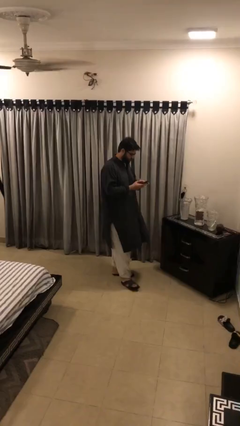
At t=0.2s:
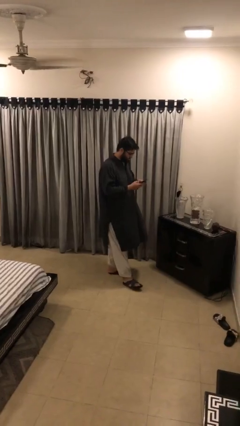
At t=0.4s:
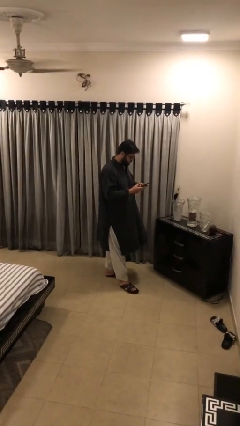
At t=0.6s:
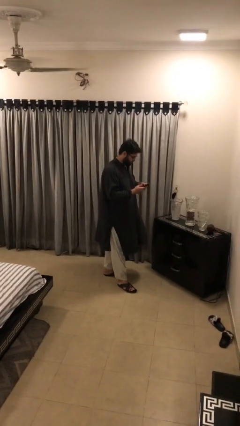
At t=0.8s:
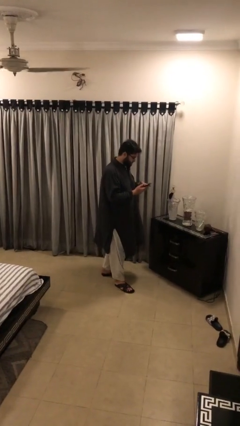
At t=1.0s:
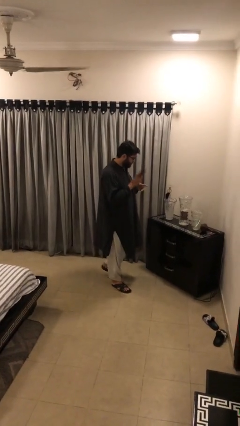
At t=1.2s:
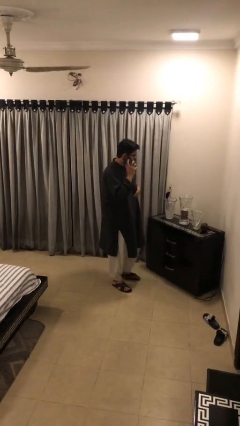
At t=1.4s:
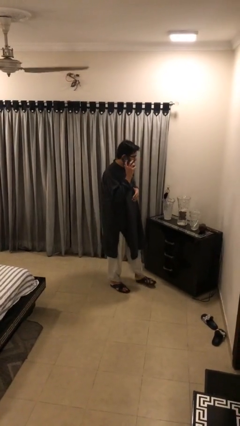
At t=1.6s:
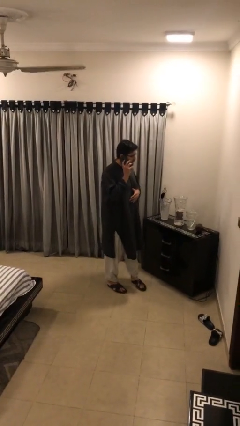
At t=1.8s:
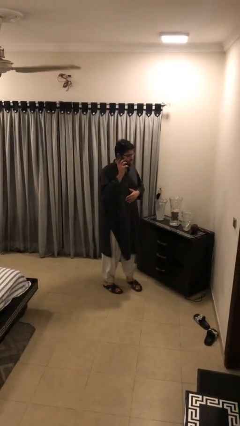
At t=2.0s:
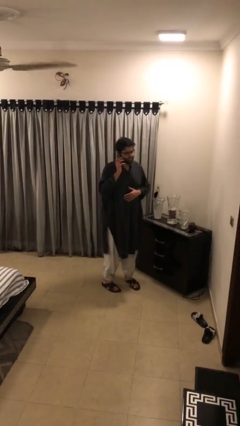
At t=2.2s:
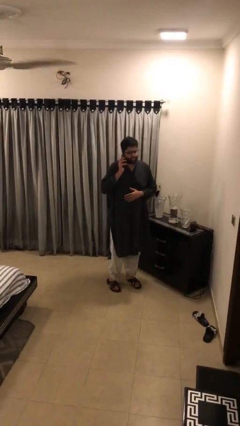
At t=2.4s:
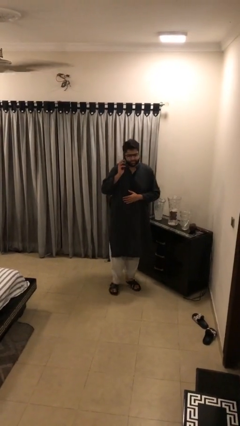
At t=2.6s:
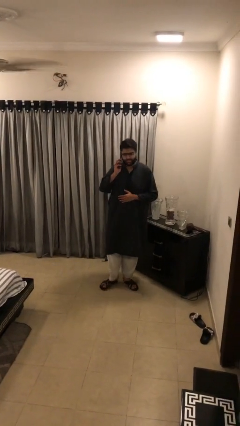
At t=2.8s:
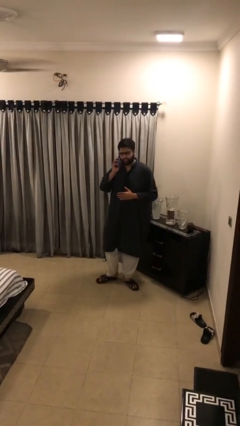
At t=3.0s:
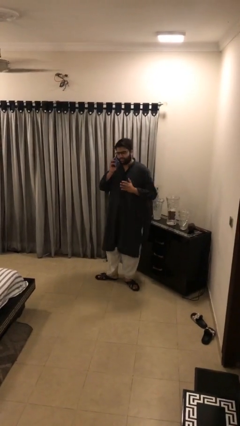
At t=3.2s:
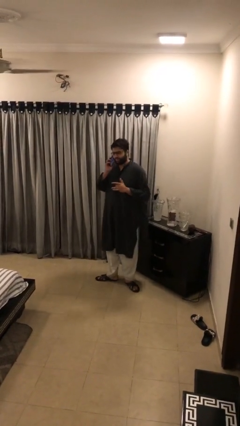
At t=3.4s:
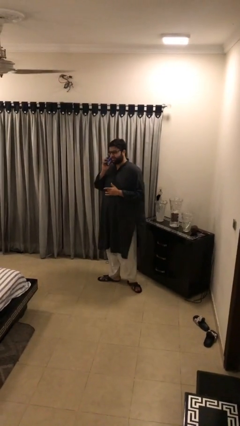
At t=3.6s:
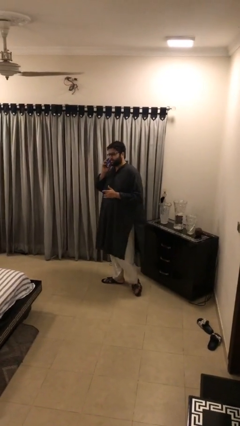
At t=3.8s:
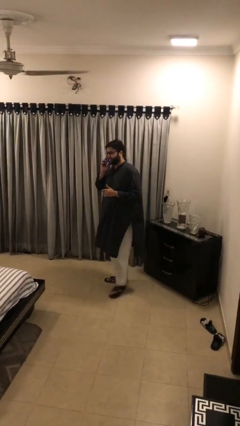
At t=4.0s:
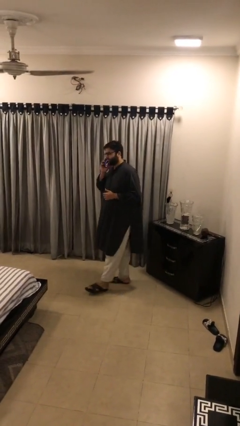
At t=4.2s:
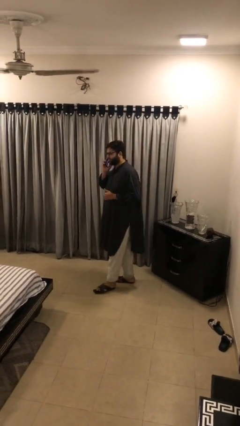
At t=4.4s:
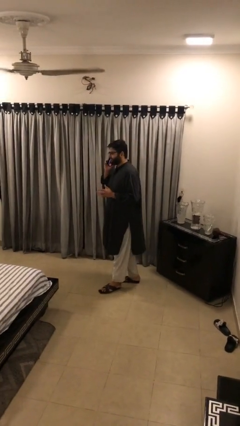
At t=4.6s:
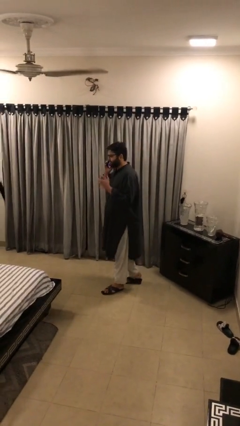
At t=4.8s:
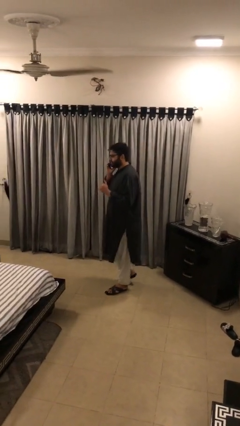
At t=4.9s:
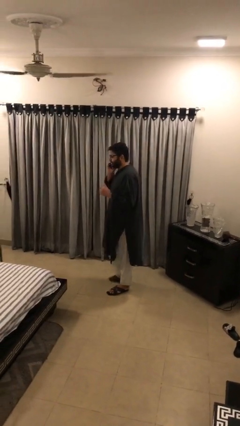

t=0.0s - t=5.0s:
person talks on phone

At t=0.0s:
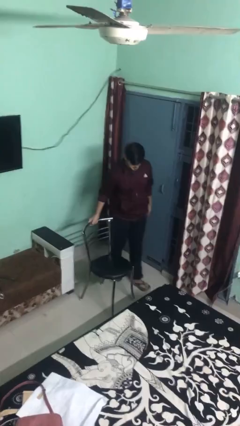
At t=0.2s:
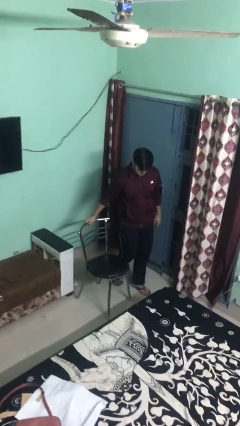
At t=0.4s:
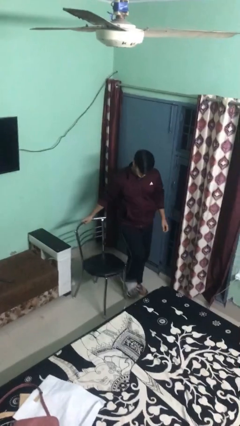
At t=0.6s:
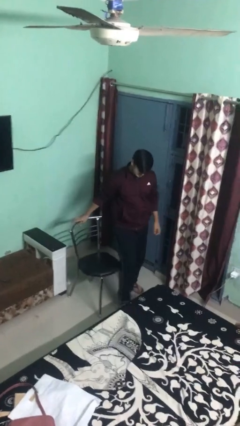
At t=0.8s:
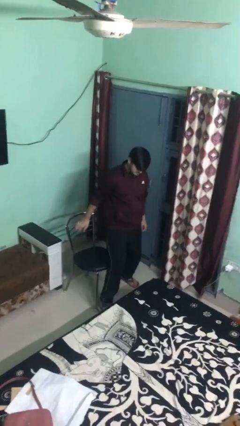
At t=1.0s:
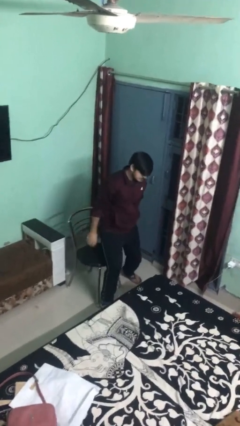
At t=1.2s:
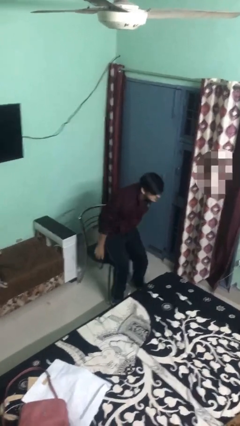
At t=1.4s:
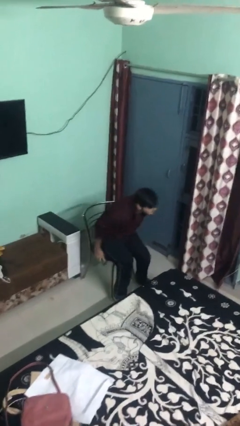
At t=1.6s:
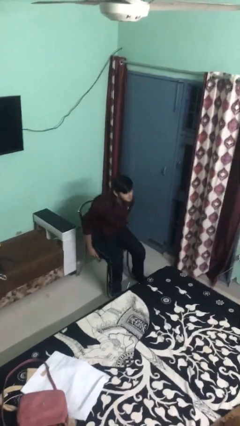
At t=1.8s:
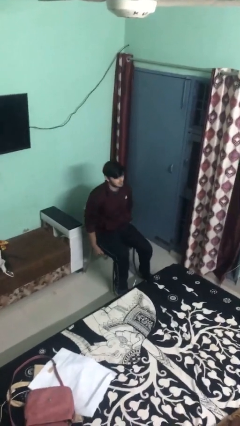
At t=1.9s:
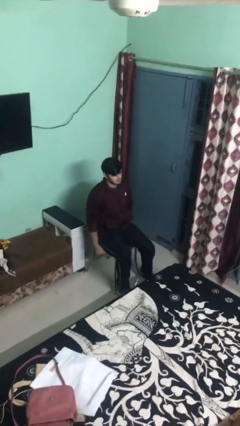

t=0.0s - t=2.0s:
person sits down

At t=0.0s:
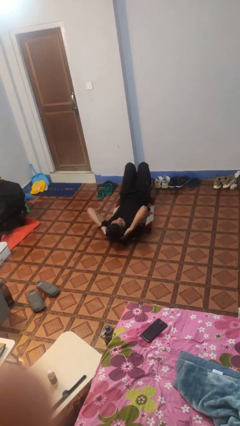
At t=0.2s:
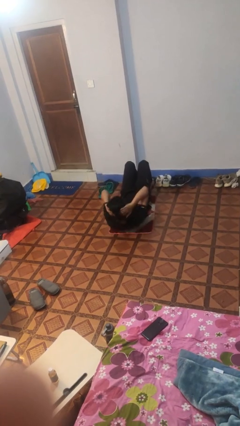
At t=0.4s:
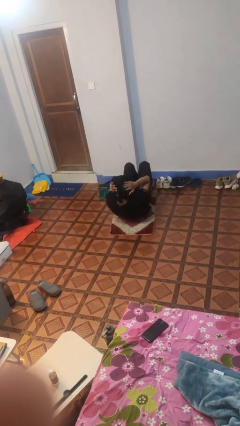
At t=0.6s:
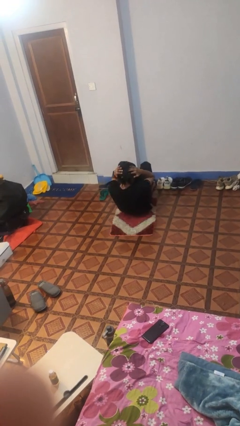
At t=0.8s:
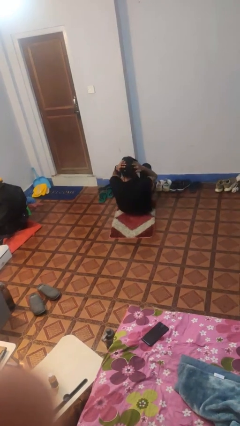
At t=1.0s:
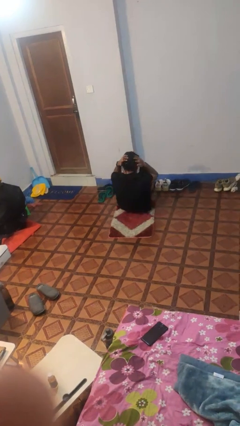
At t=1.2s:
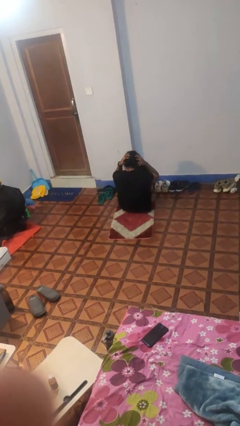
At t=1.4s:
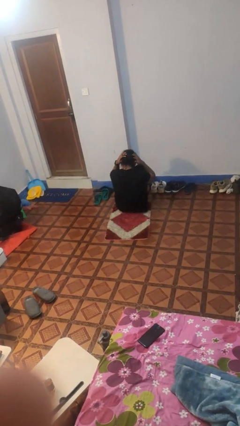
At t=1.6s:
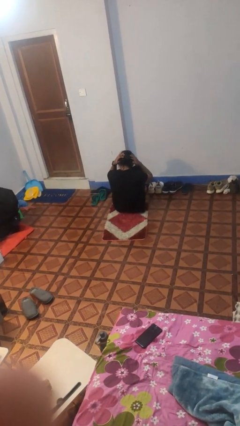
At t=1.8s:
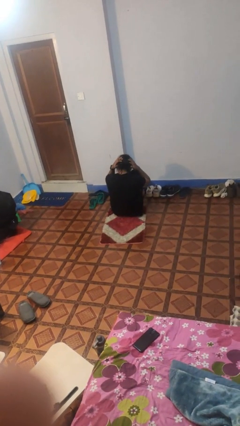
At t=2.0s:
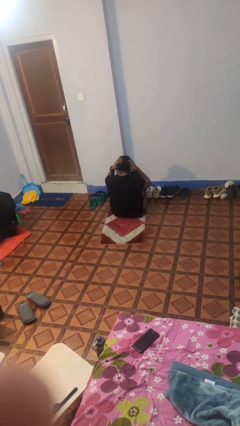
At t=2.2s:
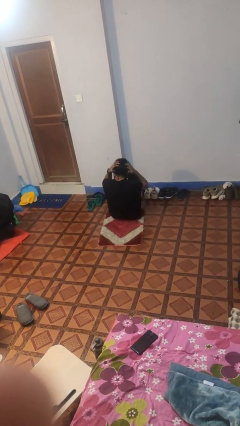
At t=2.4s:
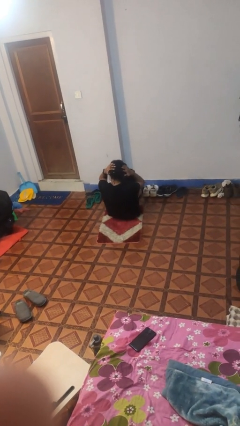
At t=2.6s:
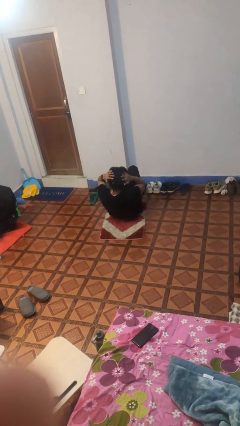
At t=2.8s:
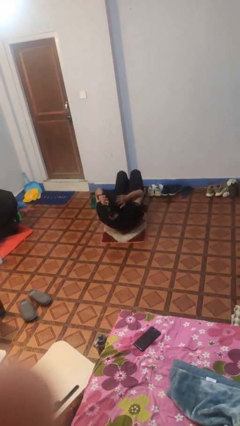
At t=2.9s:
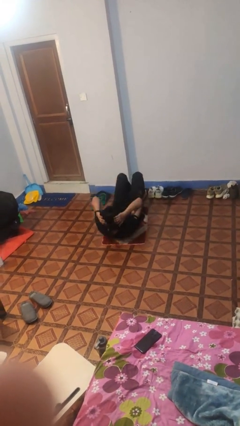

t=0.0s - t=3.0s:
person exercises with situp

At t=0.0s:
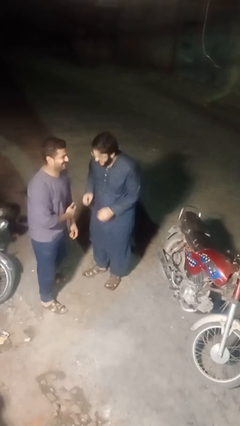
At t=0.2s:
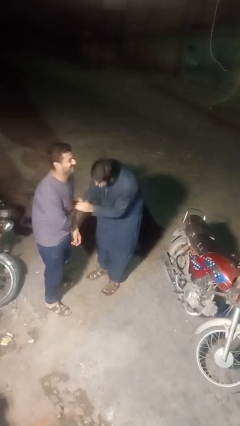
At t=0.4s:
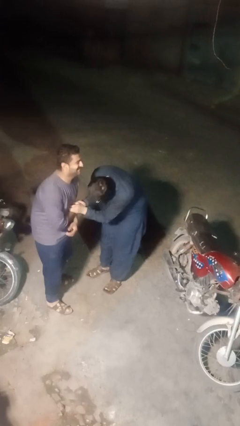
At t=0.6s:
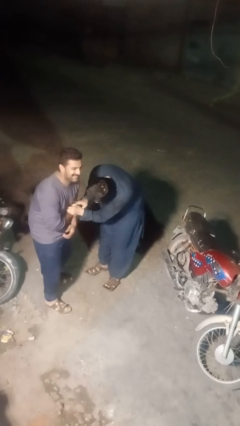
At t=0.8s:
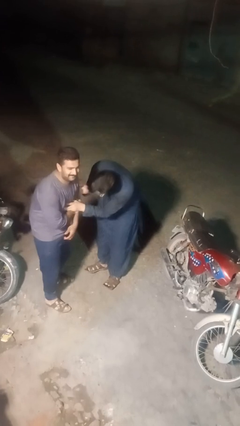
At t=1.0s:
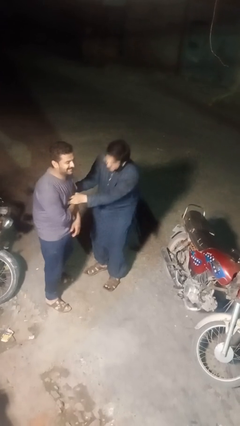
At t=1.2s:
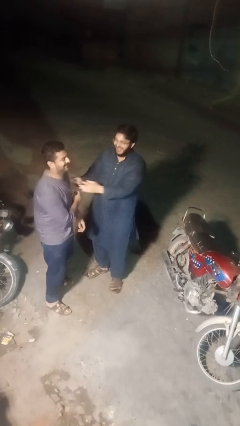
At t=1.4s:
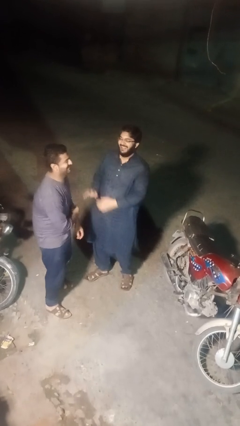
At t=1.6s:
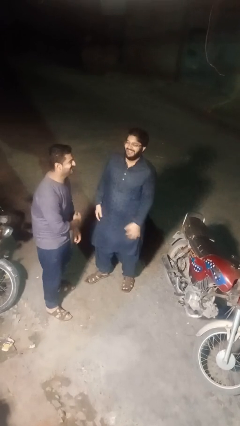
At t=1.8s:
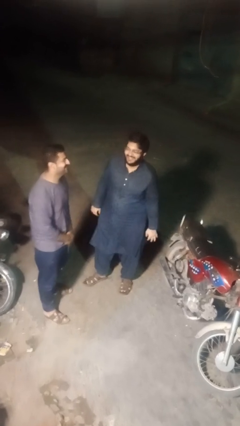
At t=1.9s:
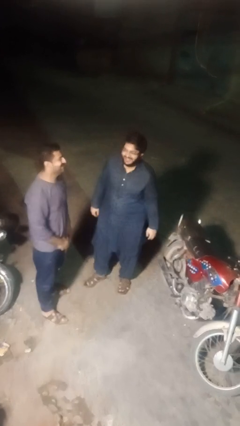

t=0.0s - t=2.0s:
person tickles person

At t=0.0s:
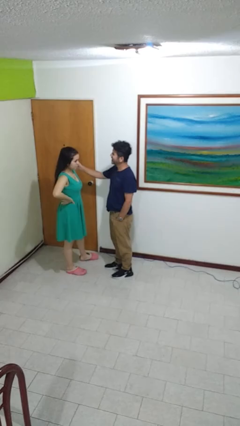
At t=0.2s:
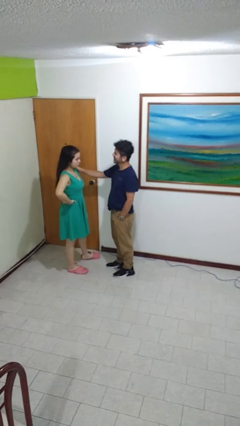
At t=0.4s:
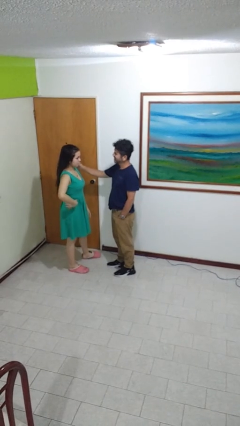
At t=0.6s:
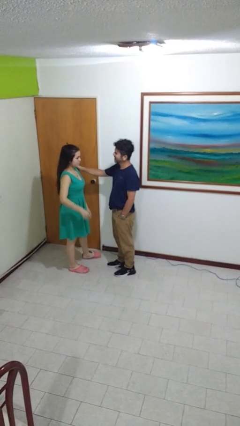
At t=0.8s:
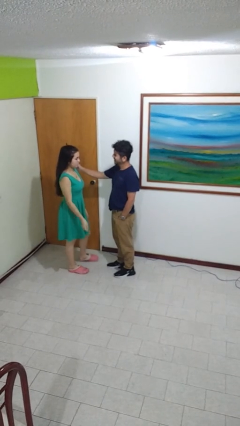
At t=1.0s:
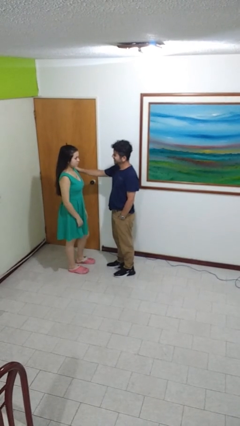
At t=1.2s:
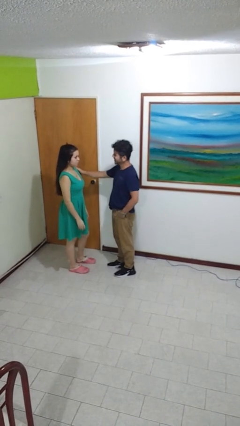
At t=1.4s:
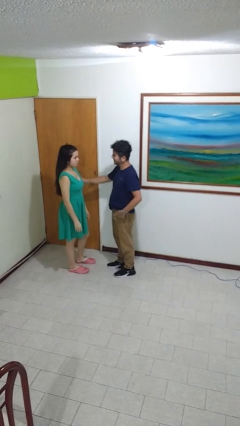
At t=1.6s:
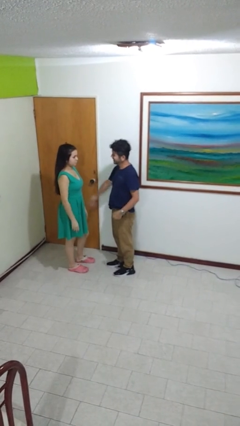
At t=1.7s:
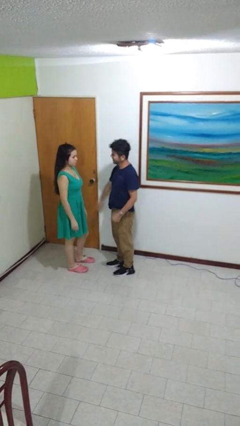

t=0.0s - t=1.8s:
person pounds shoulders of person

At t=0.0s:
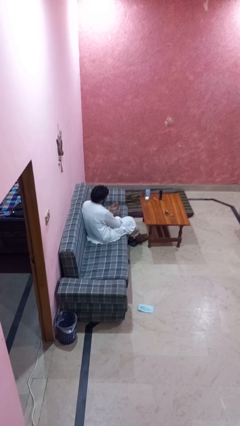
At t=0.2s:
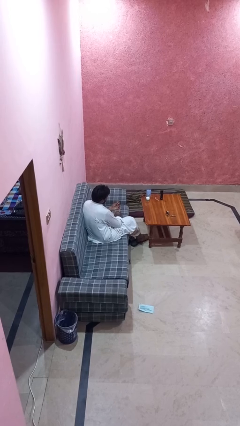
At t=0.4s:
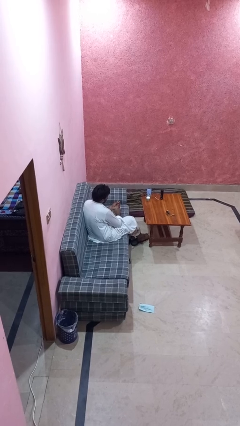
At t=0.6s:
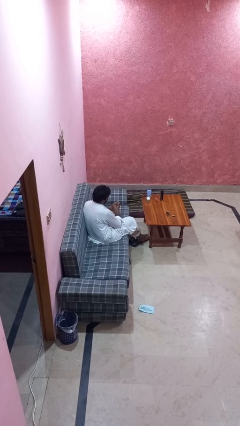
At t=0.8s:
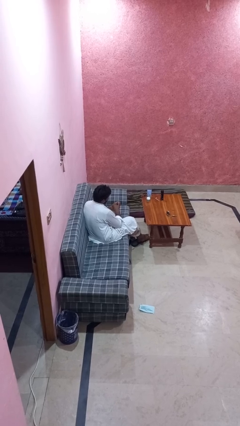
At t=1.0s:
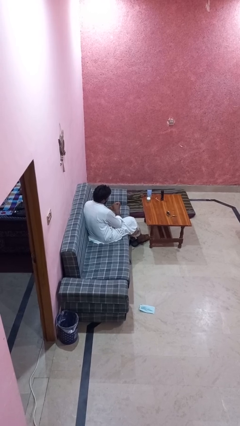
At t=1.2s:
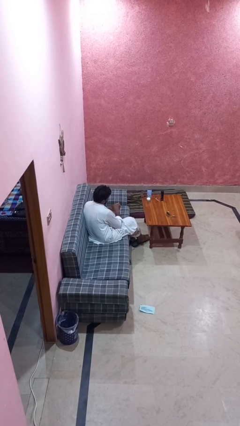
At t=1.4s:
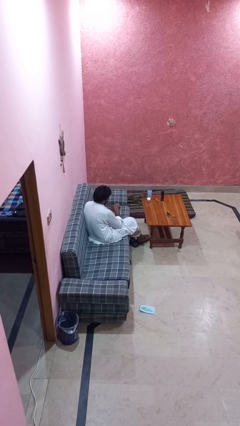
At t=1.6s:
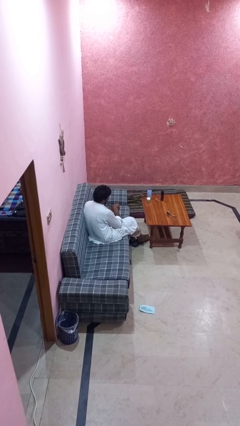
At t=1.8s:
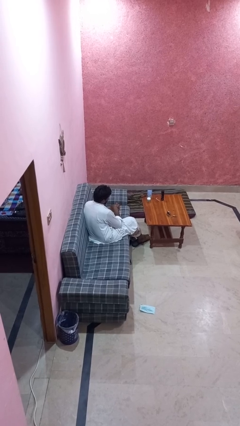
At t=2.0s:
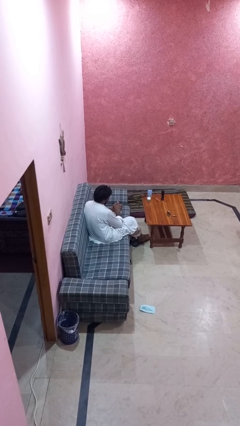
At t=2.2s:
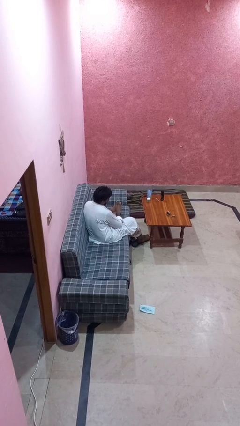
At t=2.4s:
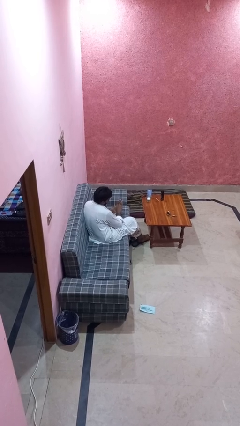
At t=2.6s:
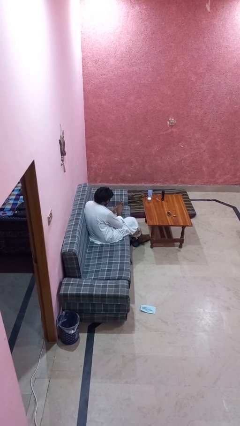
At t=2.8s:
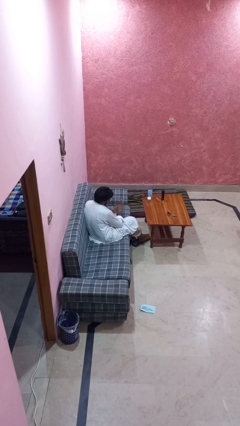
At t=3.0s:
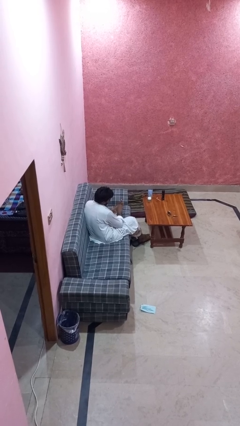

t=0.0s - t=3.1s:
person puts on ring
